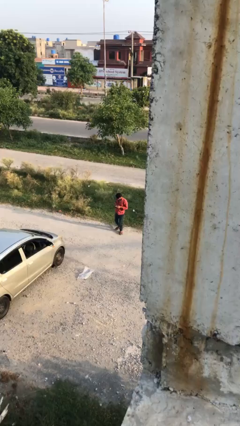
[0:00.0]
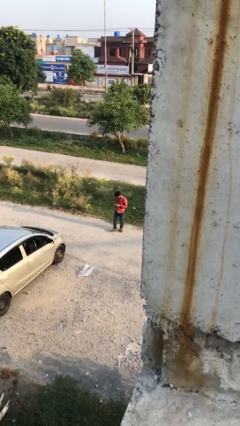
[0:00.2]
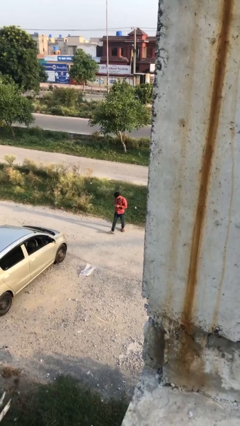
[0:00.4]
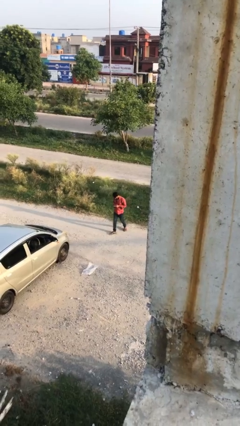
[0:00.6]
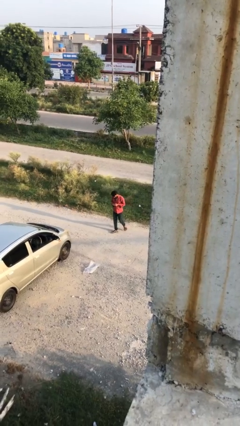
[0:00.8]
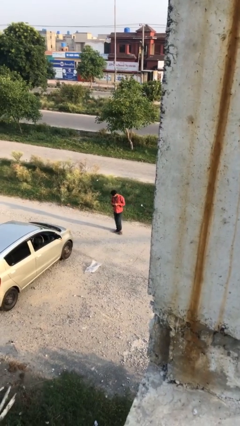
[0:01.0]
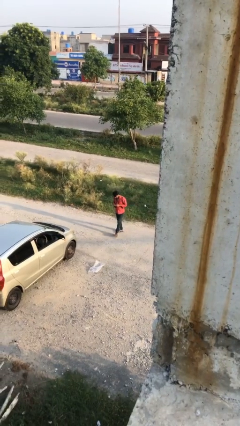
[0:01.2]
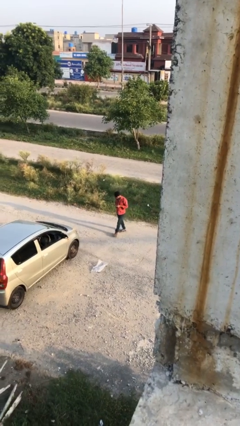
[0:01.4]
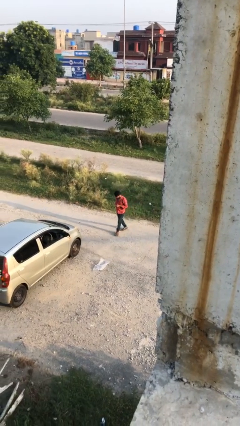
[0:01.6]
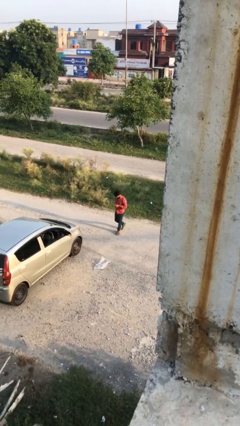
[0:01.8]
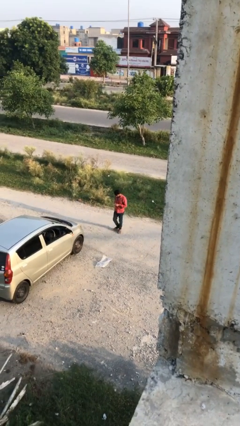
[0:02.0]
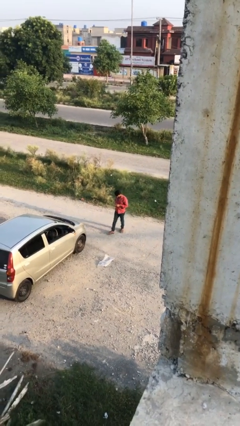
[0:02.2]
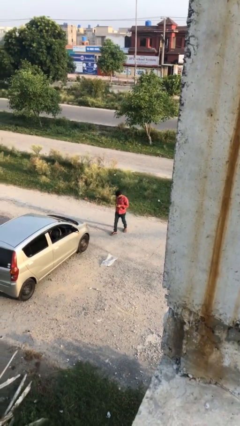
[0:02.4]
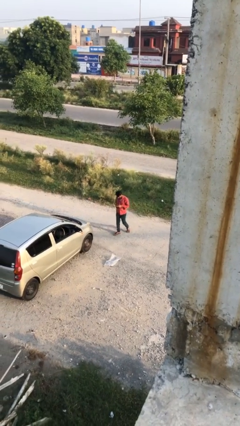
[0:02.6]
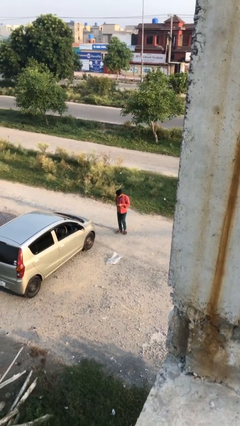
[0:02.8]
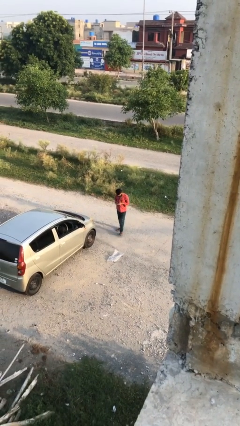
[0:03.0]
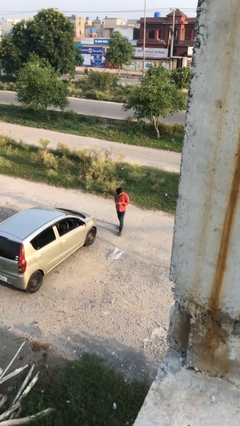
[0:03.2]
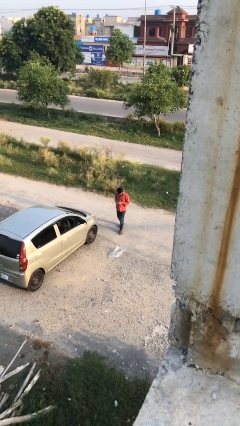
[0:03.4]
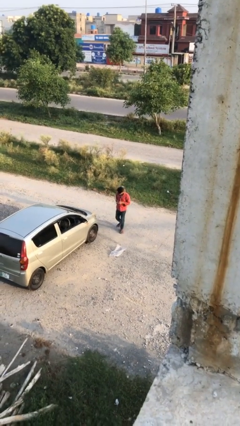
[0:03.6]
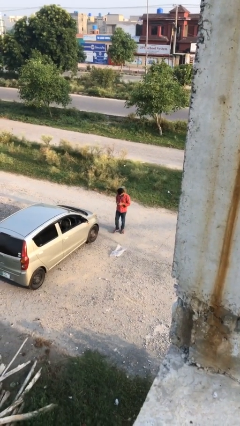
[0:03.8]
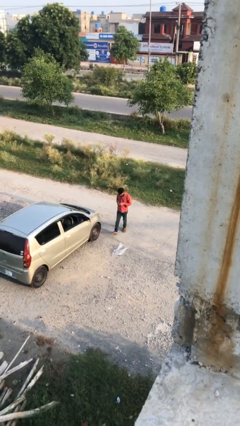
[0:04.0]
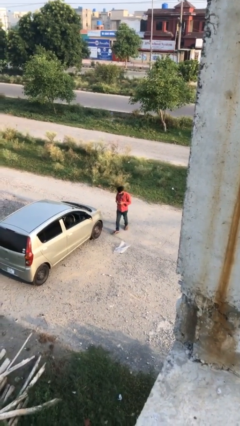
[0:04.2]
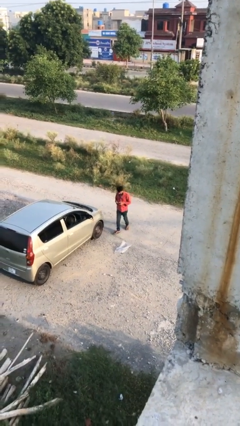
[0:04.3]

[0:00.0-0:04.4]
person texts on phone

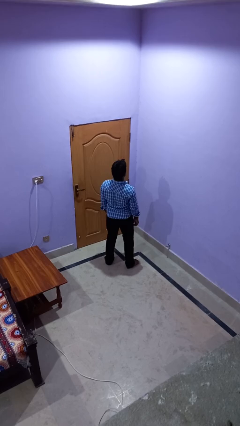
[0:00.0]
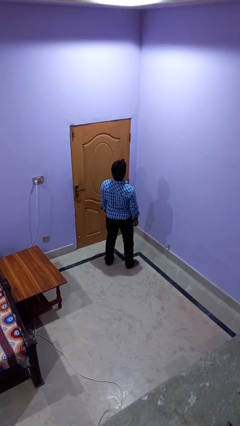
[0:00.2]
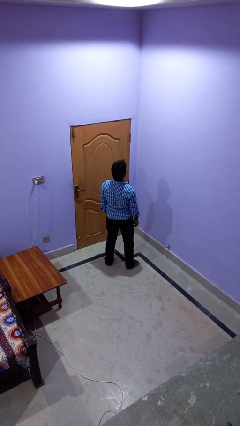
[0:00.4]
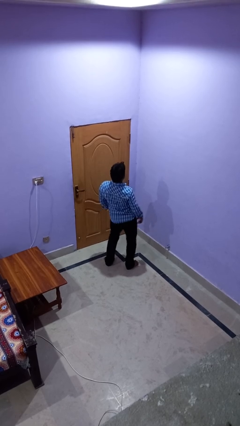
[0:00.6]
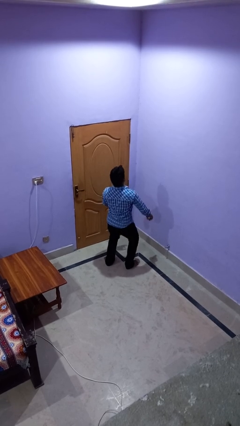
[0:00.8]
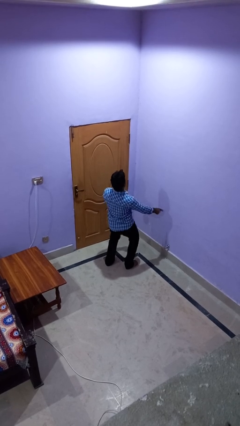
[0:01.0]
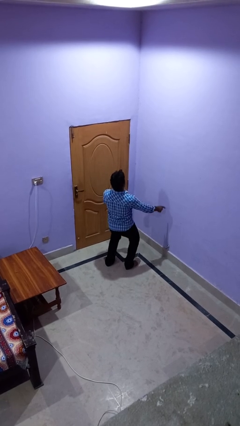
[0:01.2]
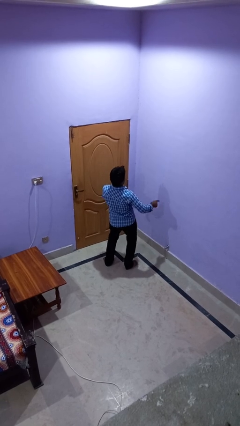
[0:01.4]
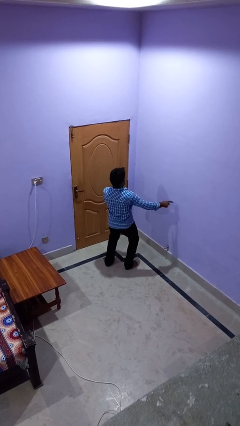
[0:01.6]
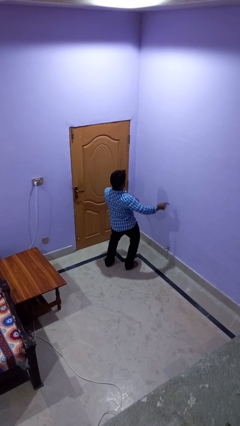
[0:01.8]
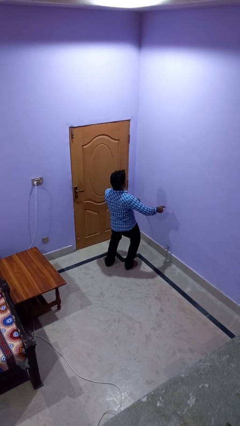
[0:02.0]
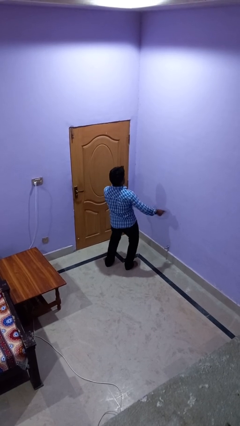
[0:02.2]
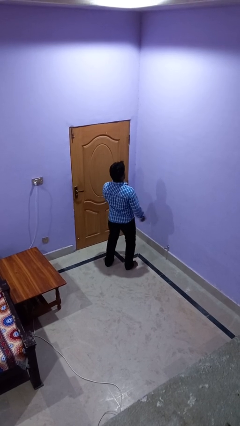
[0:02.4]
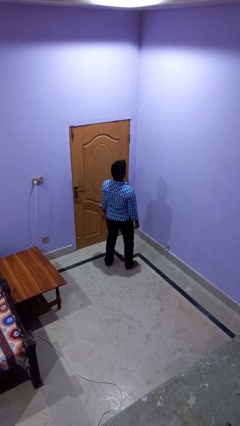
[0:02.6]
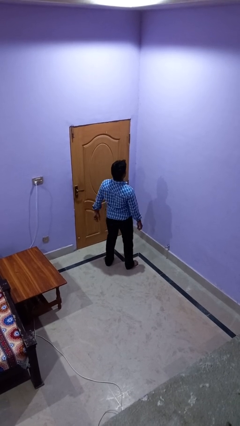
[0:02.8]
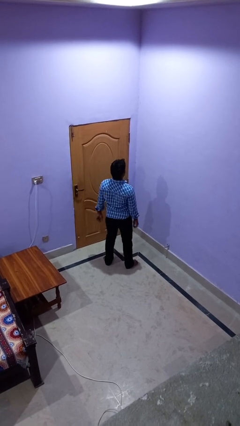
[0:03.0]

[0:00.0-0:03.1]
person dances in place

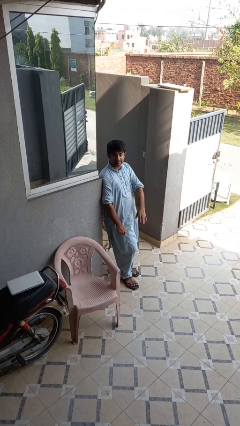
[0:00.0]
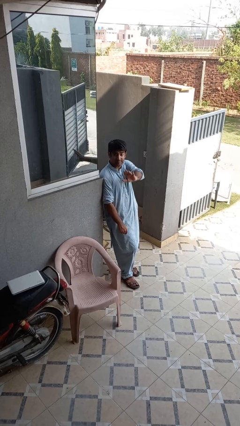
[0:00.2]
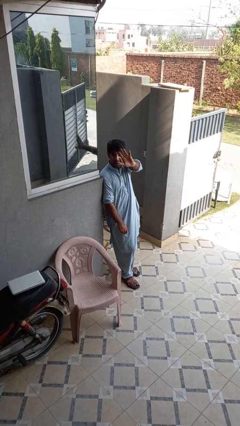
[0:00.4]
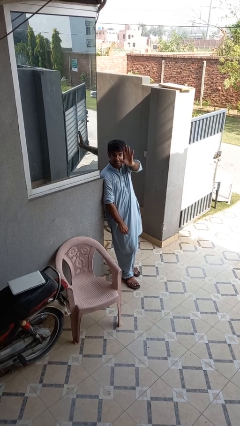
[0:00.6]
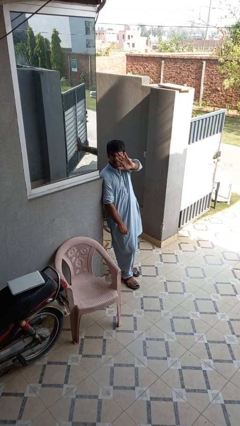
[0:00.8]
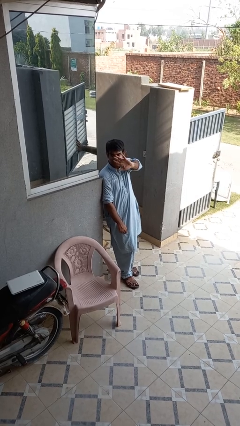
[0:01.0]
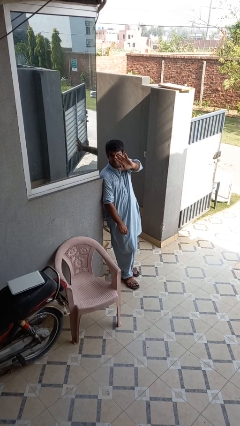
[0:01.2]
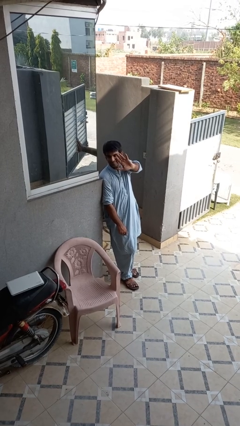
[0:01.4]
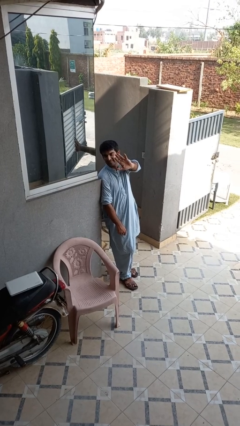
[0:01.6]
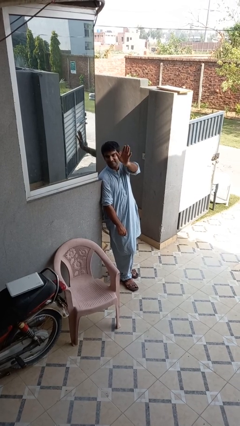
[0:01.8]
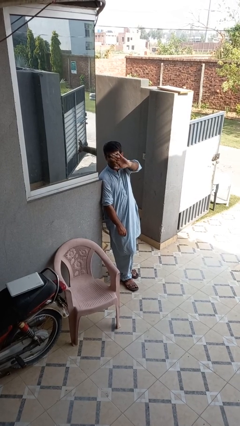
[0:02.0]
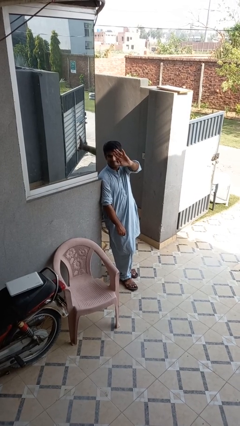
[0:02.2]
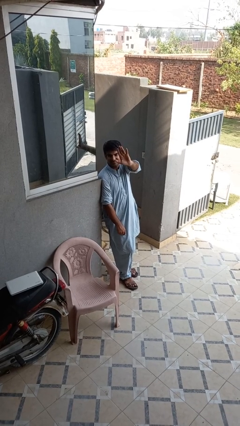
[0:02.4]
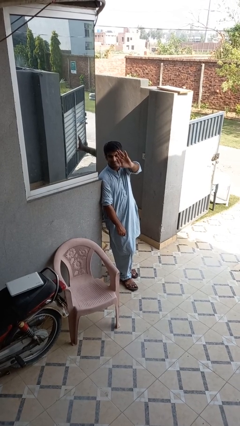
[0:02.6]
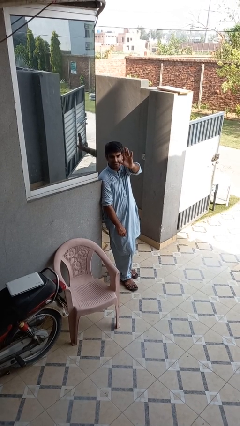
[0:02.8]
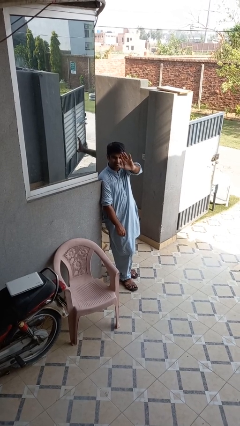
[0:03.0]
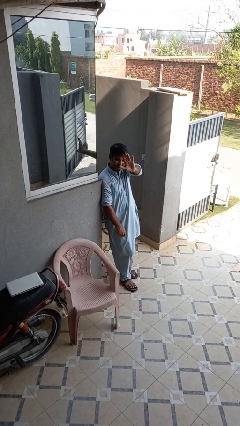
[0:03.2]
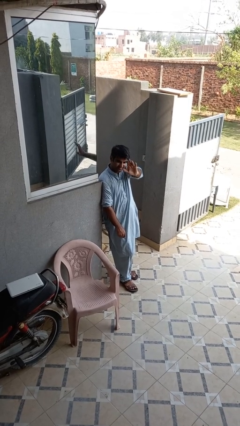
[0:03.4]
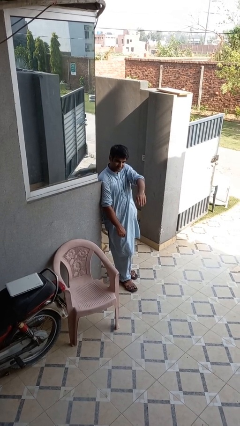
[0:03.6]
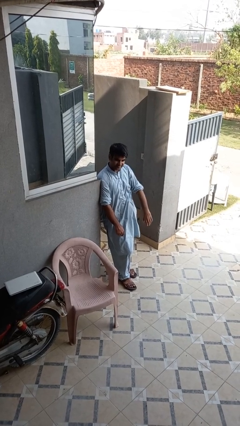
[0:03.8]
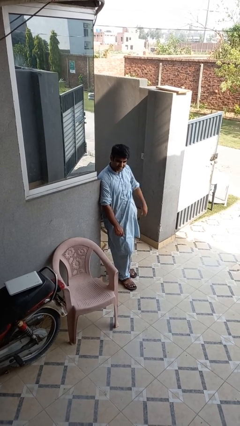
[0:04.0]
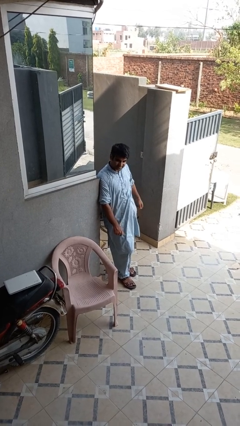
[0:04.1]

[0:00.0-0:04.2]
person waves at person

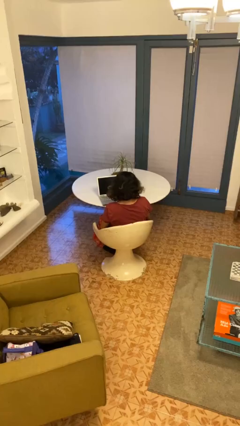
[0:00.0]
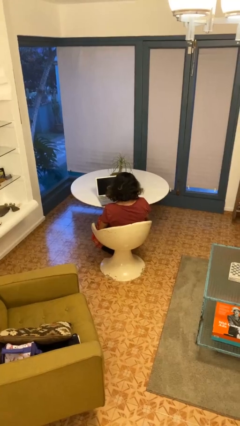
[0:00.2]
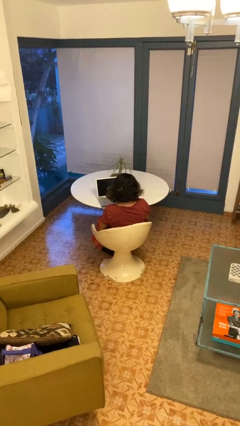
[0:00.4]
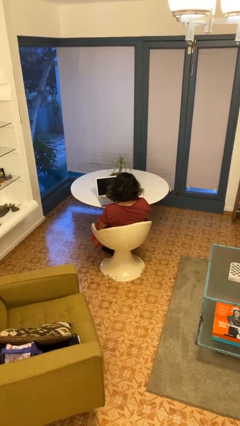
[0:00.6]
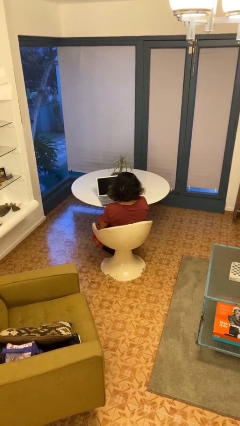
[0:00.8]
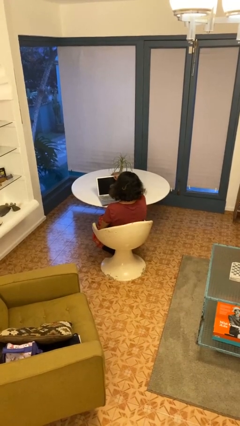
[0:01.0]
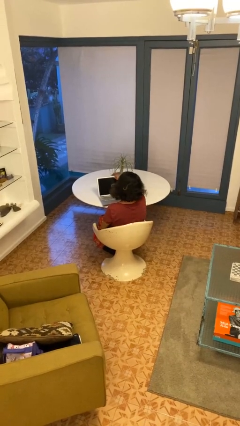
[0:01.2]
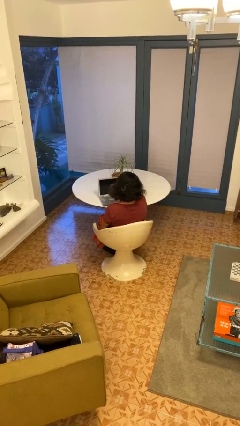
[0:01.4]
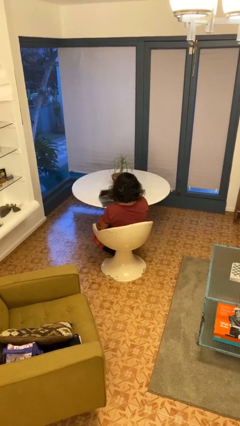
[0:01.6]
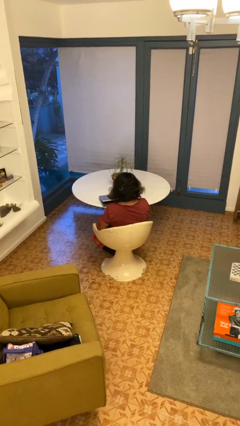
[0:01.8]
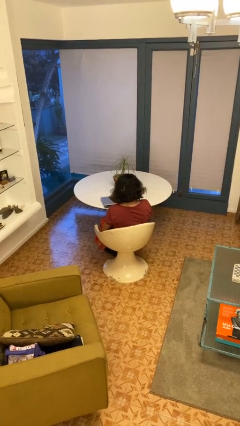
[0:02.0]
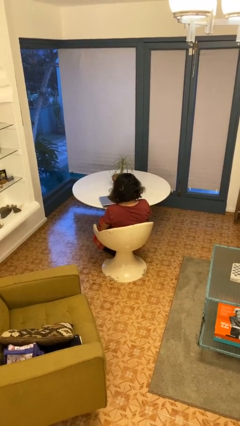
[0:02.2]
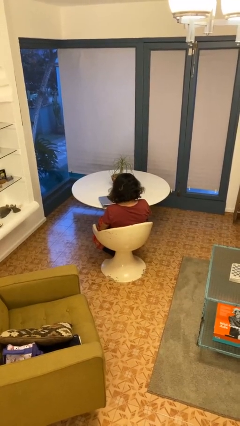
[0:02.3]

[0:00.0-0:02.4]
person closes laptop

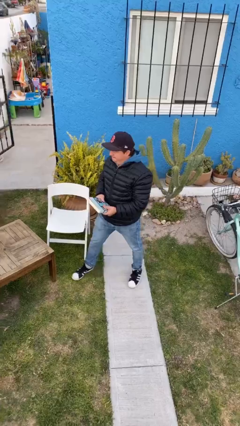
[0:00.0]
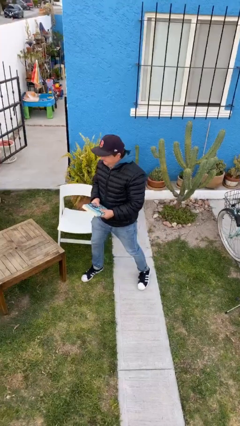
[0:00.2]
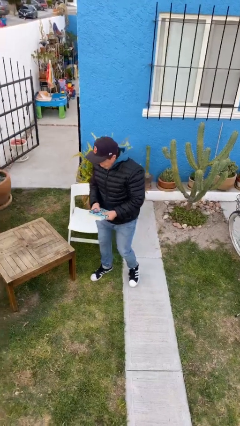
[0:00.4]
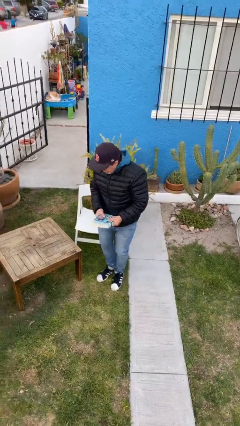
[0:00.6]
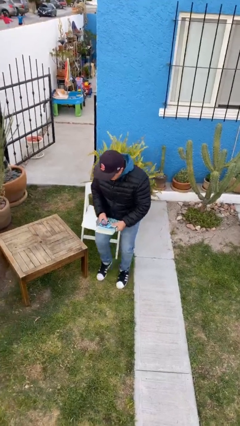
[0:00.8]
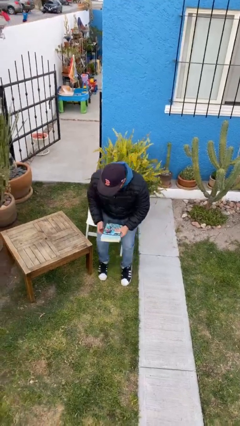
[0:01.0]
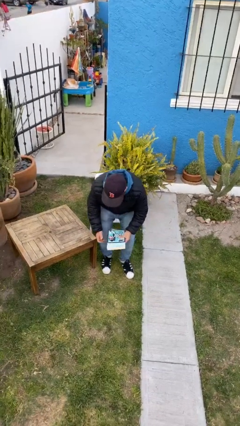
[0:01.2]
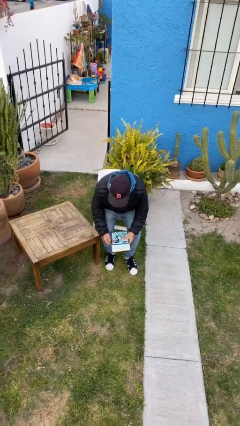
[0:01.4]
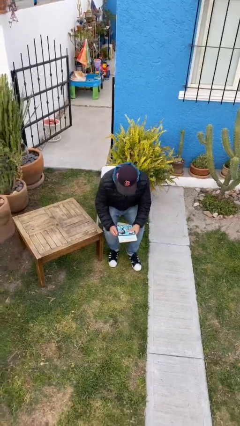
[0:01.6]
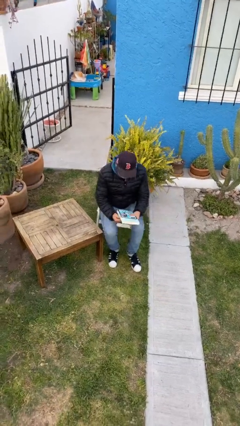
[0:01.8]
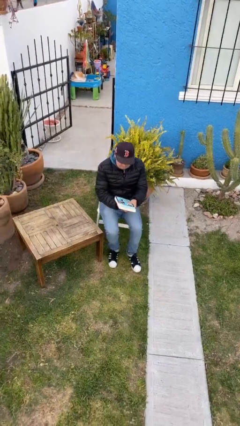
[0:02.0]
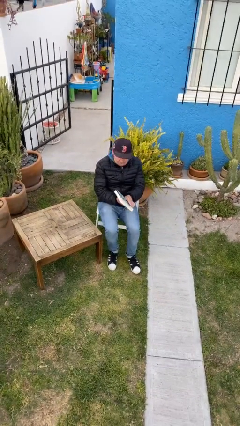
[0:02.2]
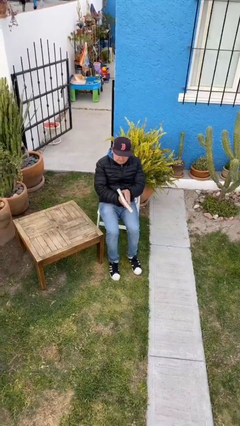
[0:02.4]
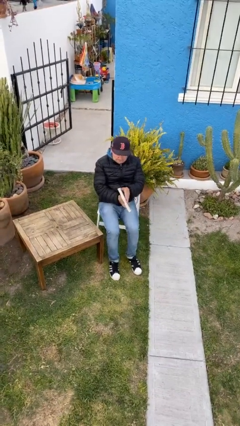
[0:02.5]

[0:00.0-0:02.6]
person sits down

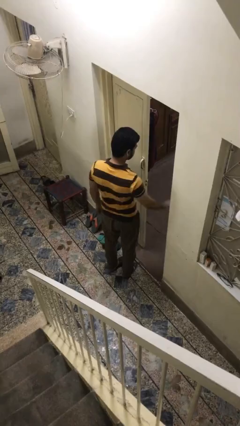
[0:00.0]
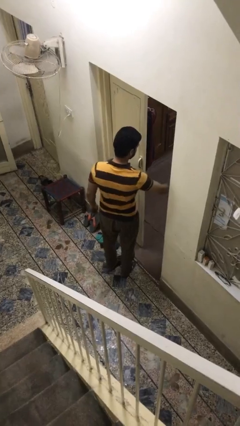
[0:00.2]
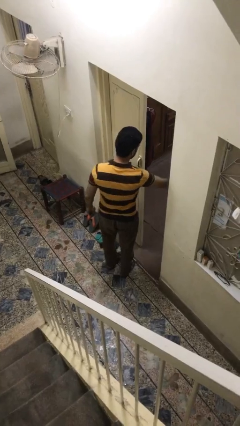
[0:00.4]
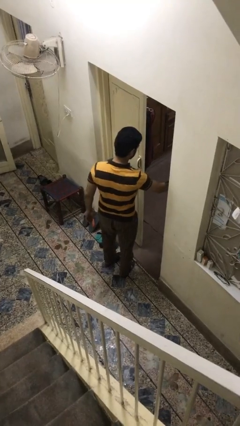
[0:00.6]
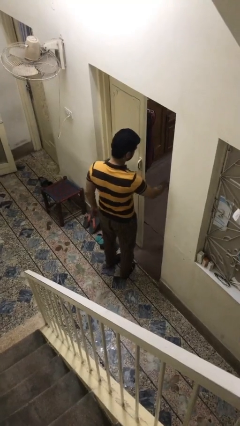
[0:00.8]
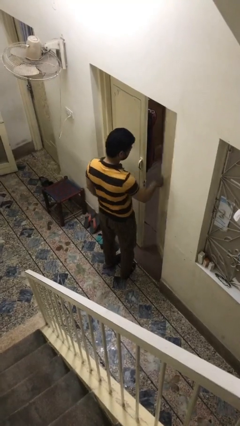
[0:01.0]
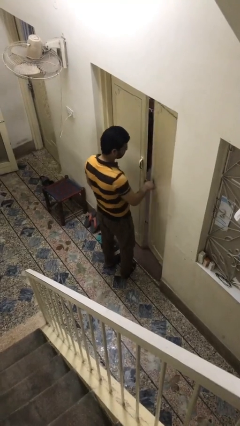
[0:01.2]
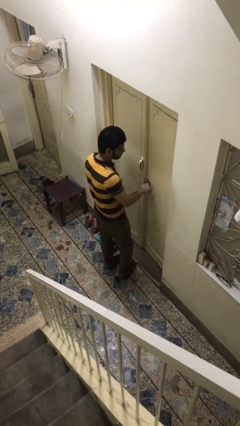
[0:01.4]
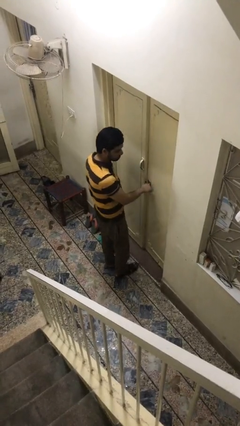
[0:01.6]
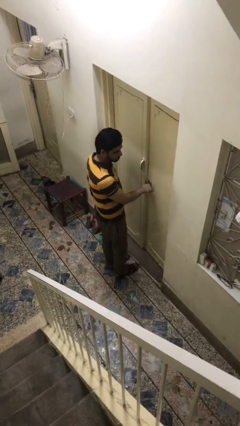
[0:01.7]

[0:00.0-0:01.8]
person closes facility door
